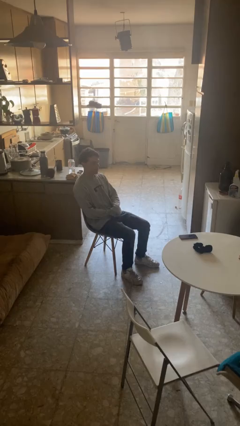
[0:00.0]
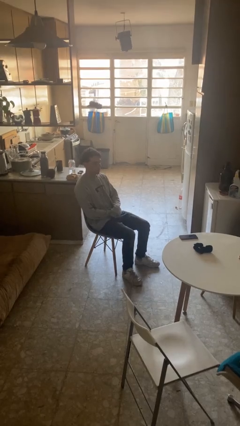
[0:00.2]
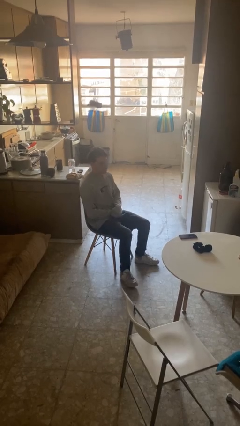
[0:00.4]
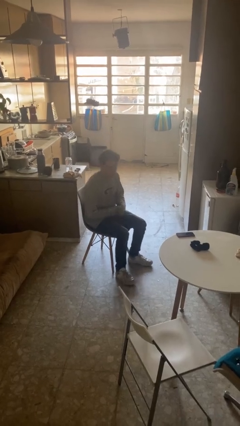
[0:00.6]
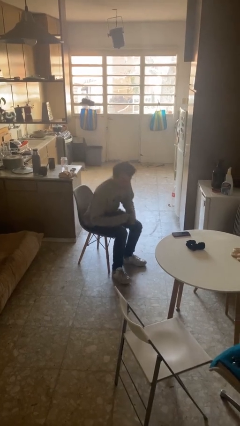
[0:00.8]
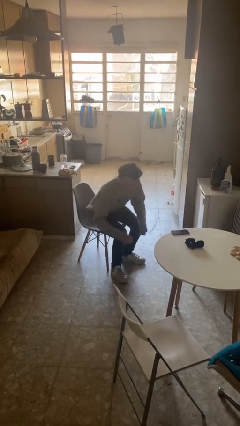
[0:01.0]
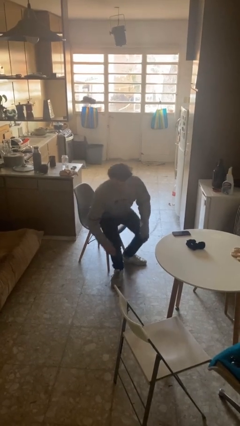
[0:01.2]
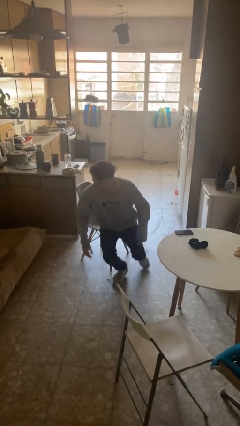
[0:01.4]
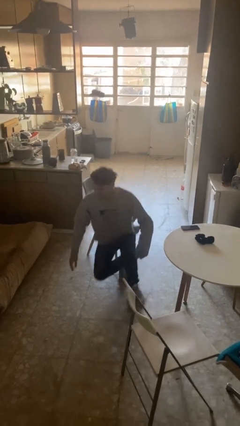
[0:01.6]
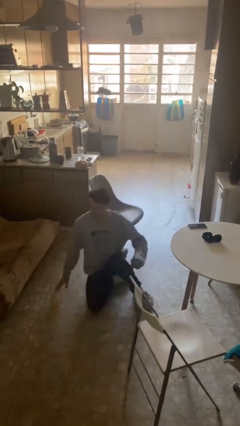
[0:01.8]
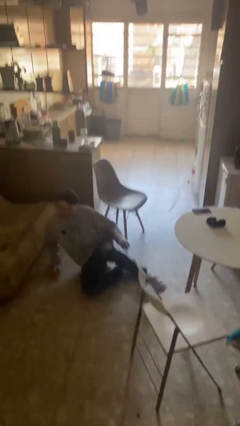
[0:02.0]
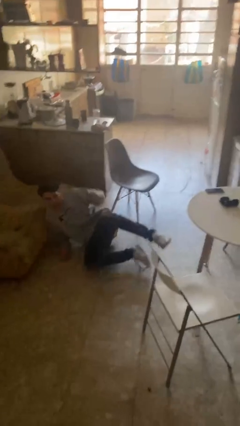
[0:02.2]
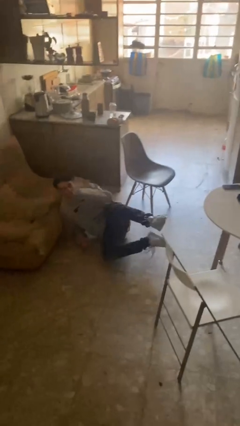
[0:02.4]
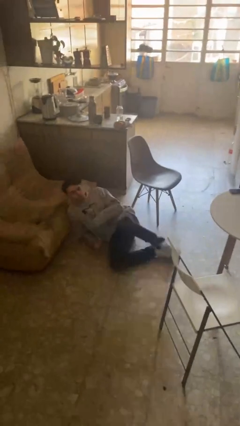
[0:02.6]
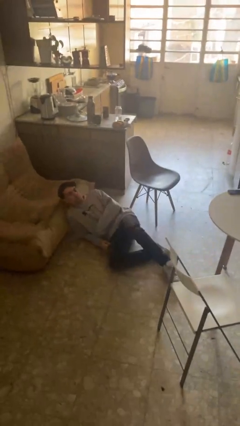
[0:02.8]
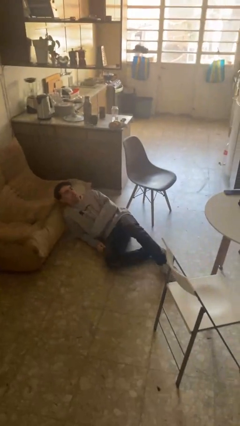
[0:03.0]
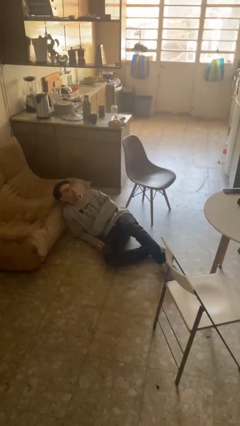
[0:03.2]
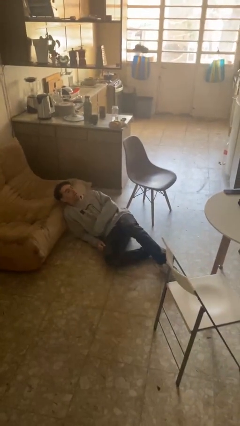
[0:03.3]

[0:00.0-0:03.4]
person falls from chair

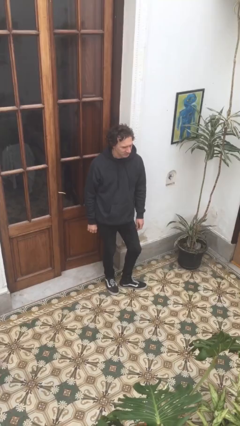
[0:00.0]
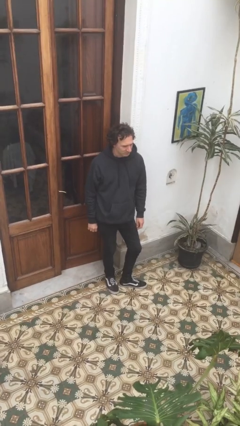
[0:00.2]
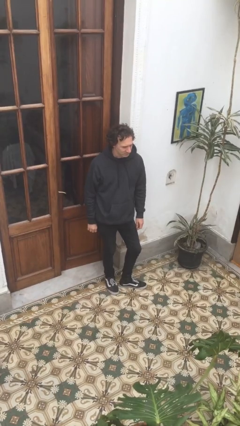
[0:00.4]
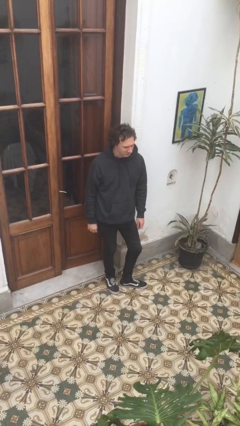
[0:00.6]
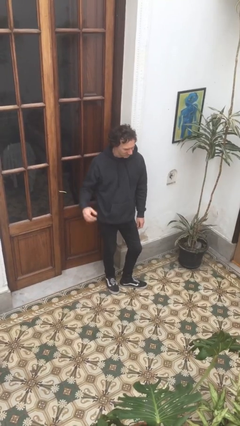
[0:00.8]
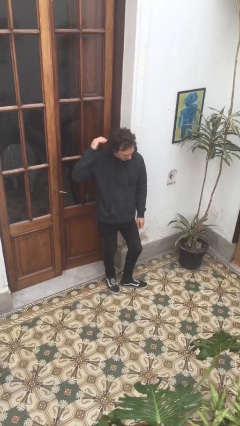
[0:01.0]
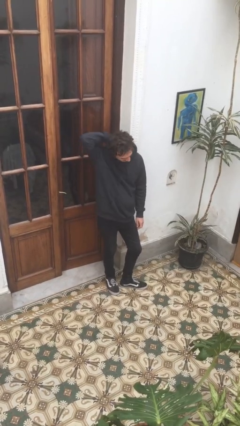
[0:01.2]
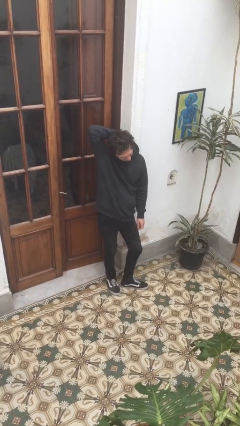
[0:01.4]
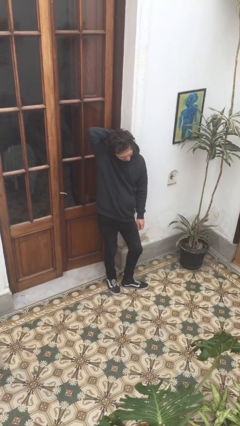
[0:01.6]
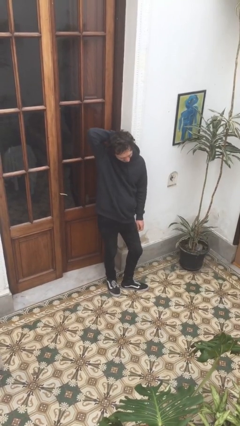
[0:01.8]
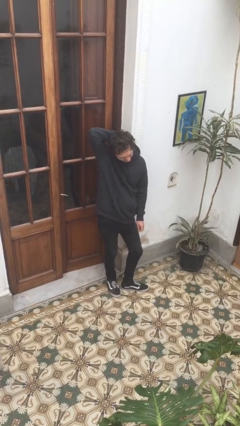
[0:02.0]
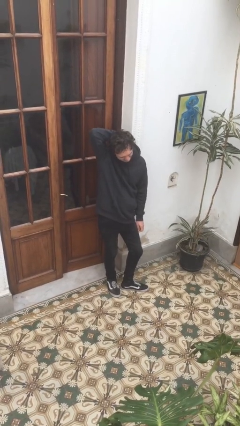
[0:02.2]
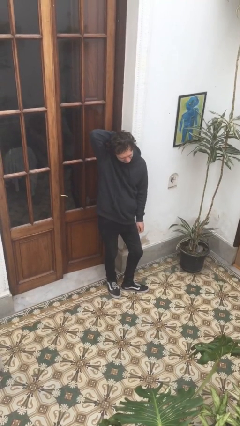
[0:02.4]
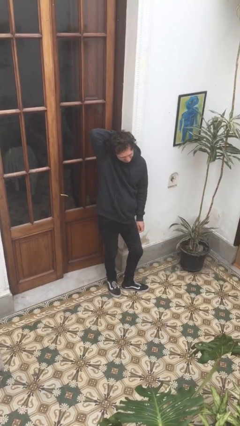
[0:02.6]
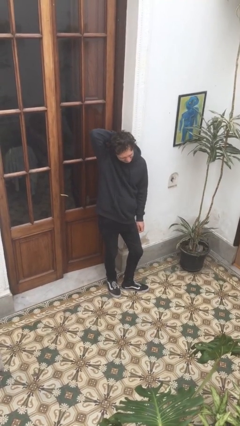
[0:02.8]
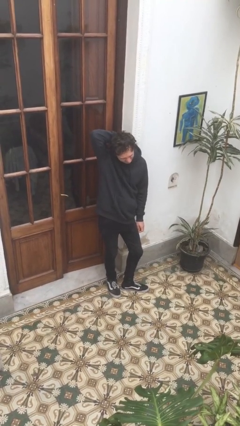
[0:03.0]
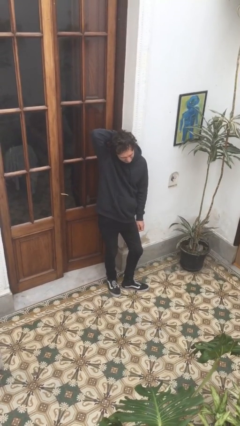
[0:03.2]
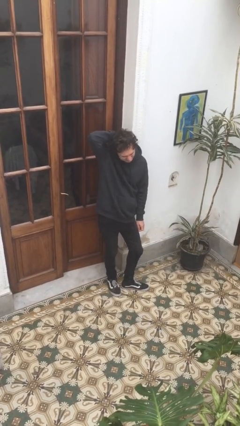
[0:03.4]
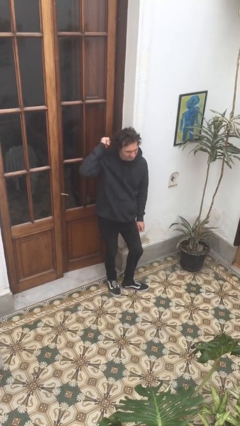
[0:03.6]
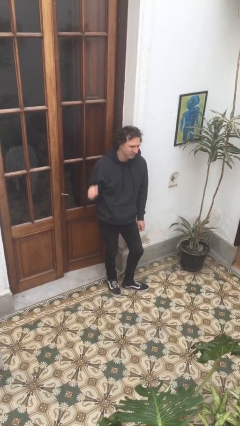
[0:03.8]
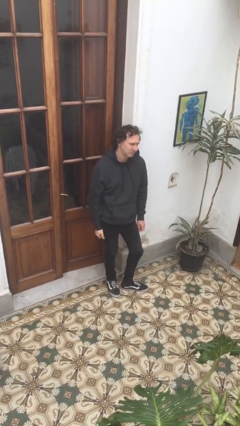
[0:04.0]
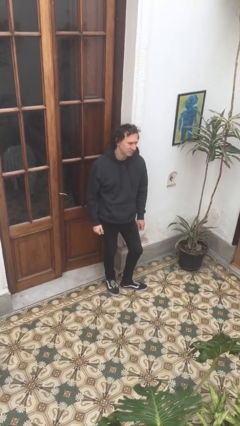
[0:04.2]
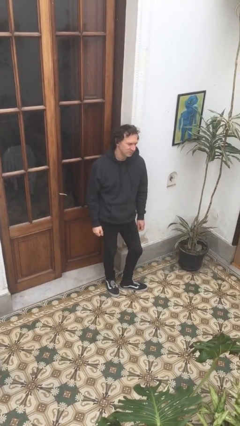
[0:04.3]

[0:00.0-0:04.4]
person rubs neck

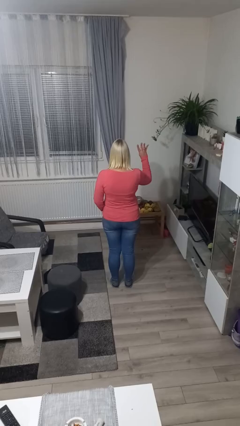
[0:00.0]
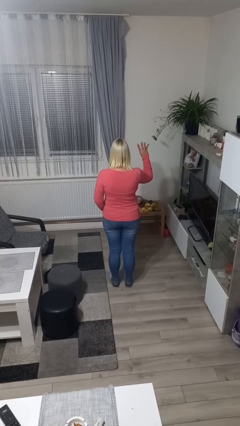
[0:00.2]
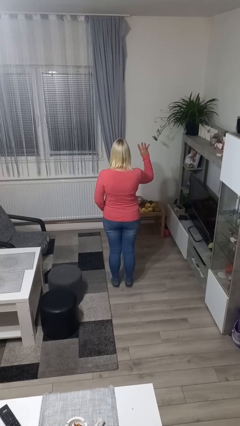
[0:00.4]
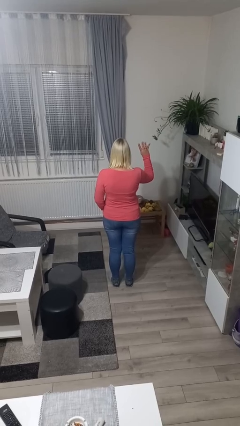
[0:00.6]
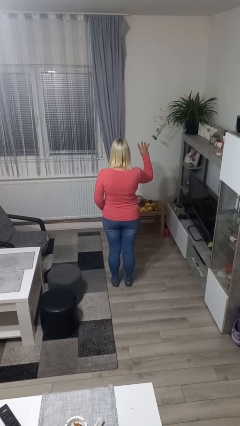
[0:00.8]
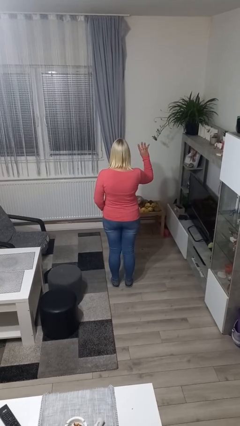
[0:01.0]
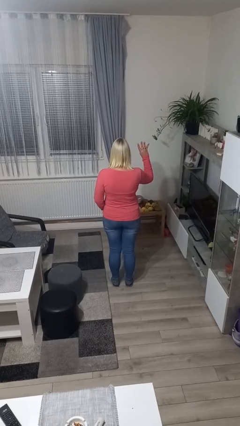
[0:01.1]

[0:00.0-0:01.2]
person gestures number four

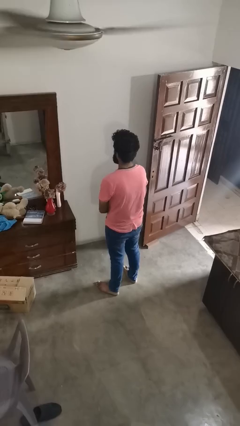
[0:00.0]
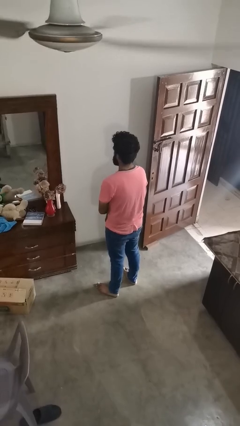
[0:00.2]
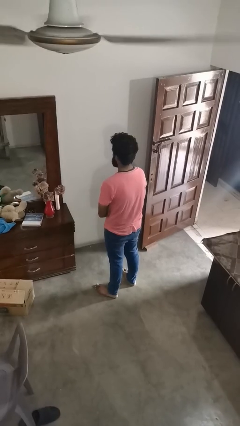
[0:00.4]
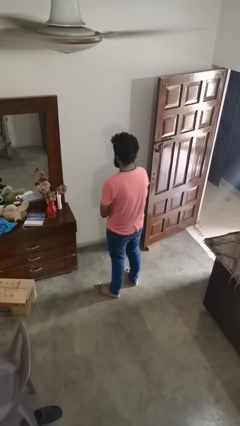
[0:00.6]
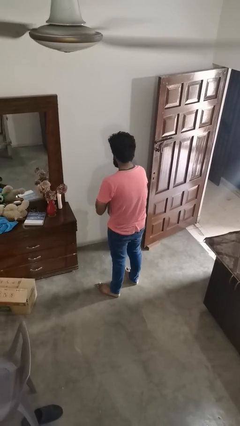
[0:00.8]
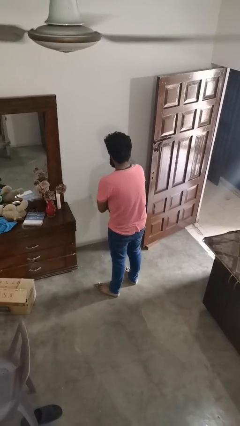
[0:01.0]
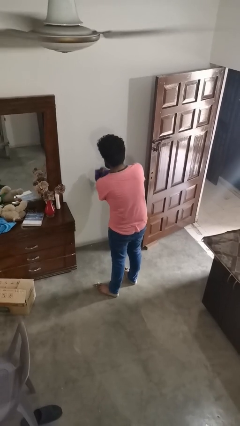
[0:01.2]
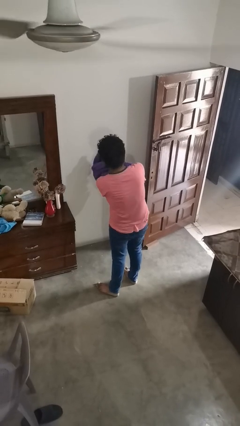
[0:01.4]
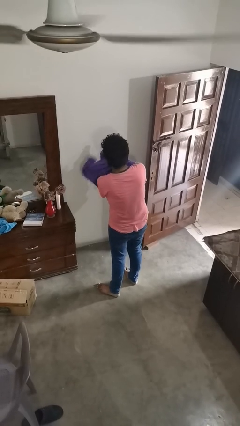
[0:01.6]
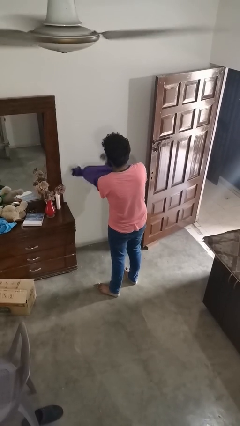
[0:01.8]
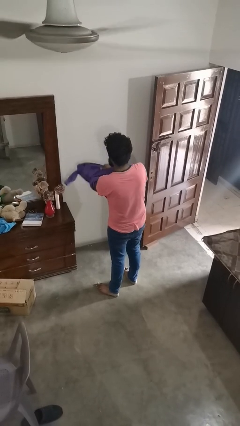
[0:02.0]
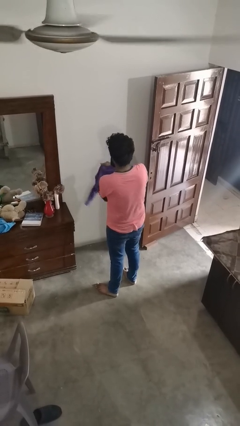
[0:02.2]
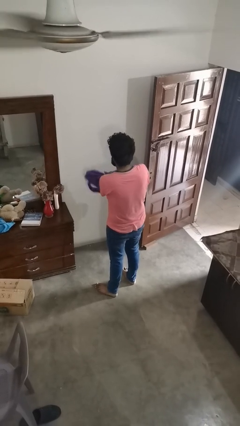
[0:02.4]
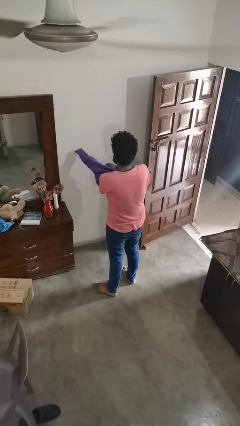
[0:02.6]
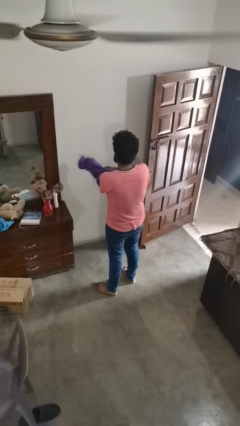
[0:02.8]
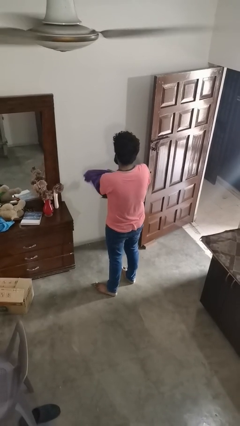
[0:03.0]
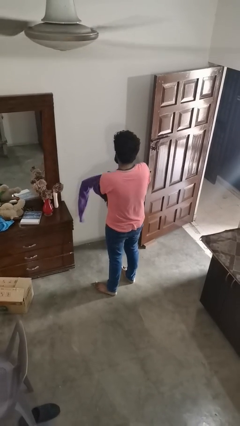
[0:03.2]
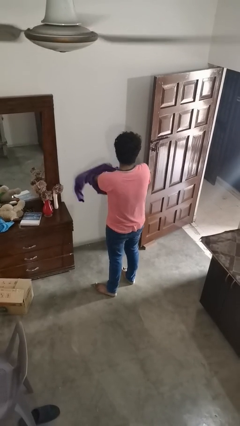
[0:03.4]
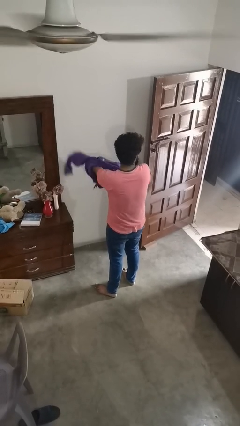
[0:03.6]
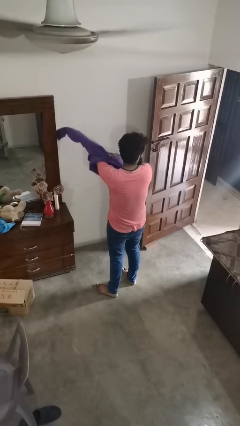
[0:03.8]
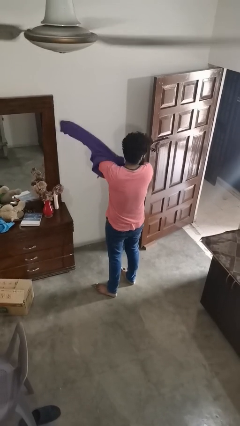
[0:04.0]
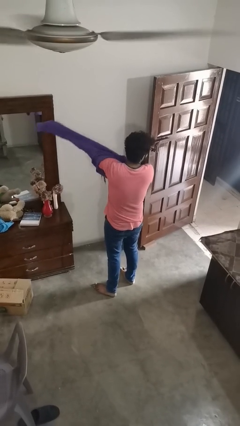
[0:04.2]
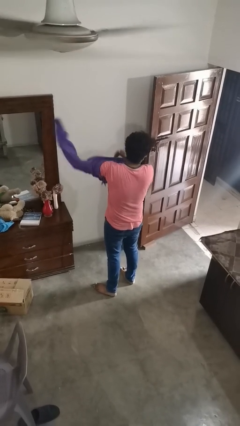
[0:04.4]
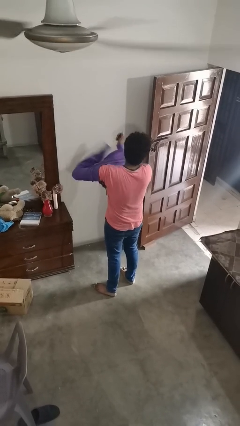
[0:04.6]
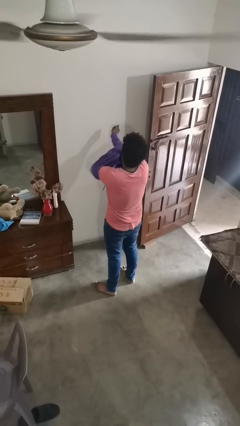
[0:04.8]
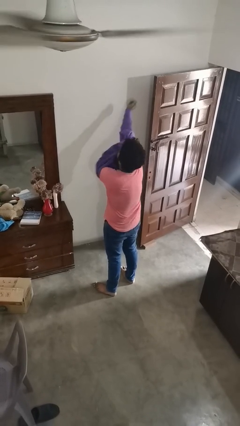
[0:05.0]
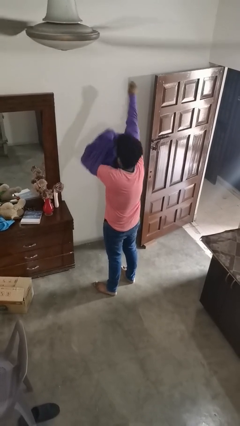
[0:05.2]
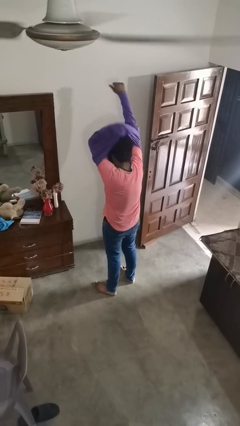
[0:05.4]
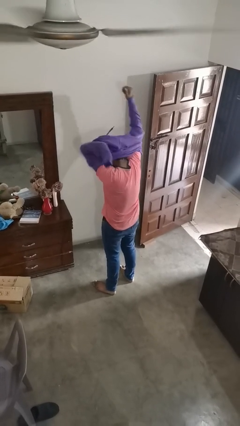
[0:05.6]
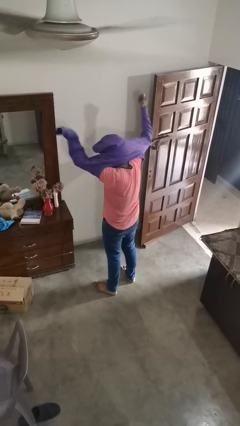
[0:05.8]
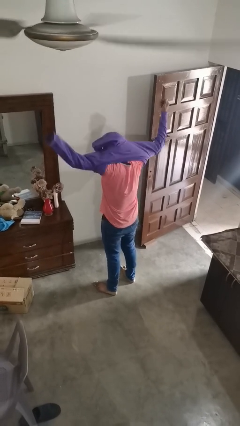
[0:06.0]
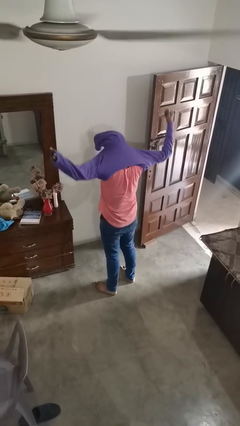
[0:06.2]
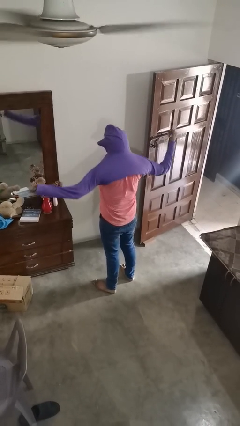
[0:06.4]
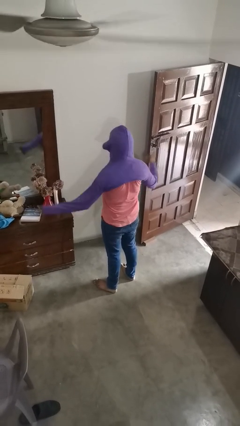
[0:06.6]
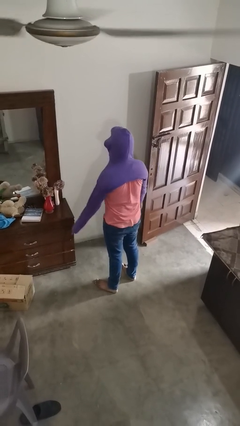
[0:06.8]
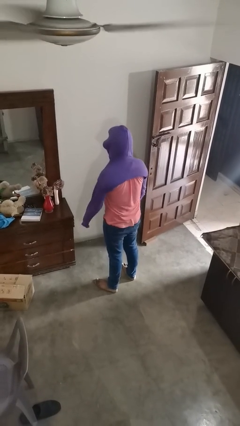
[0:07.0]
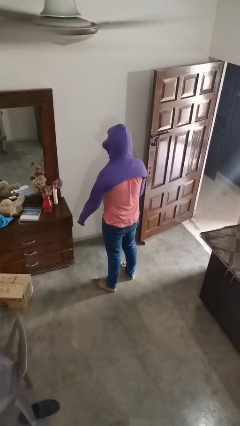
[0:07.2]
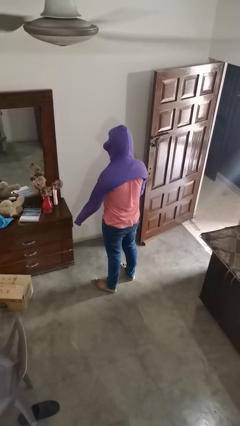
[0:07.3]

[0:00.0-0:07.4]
person puts on hoodie

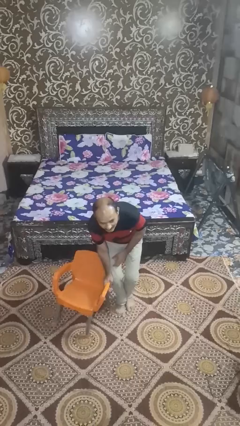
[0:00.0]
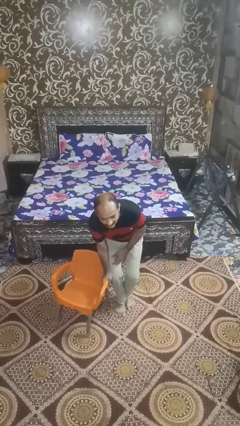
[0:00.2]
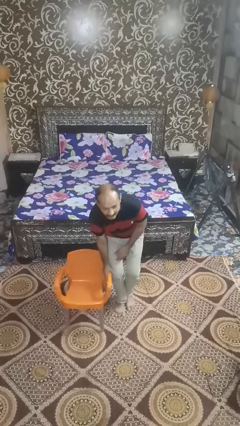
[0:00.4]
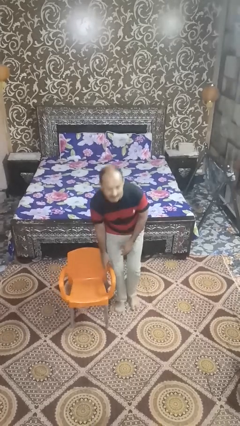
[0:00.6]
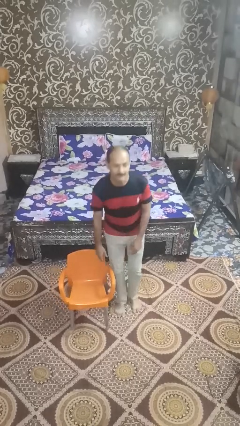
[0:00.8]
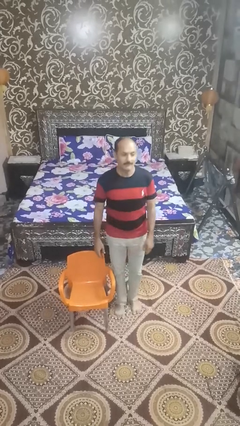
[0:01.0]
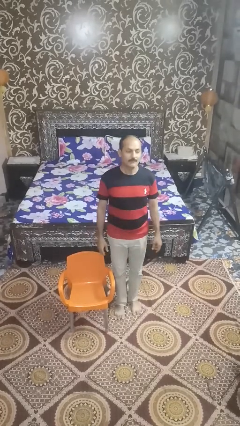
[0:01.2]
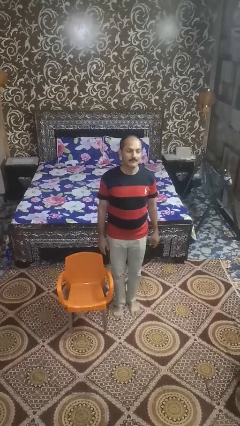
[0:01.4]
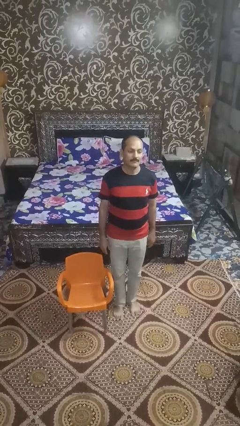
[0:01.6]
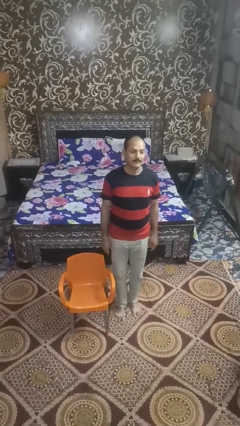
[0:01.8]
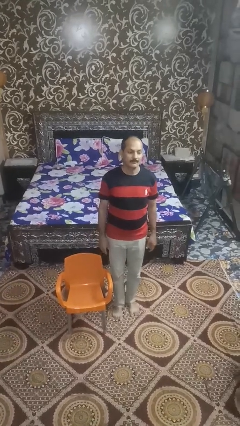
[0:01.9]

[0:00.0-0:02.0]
person stands up from floor
